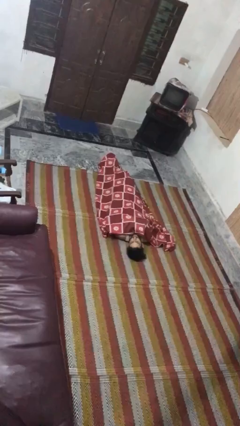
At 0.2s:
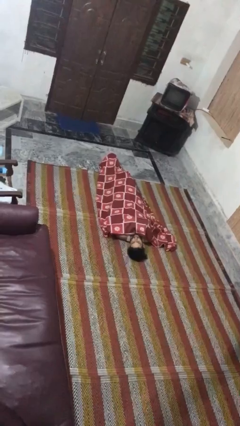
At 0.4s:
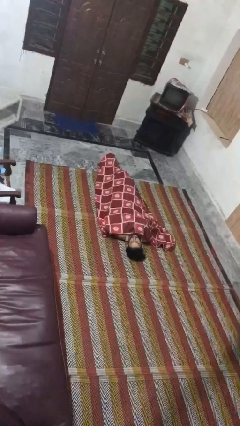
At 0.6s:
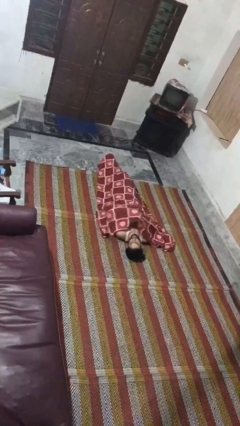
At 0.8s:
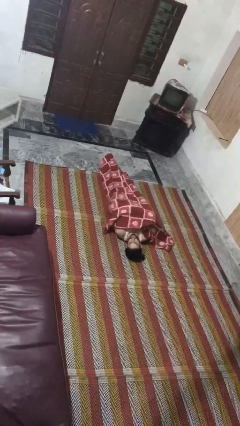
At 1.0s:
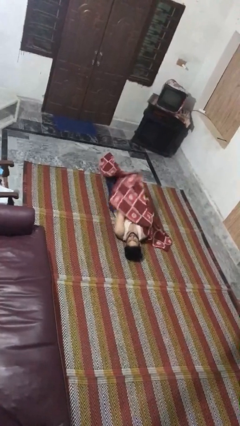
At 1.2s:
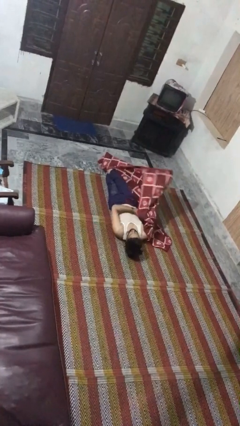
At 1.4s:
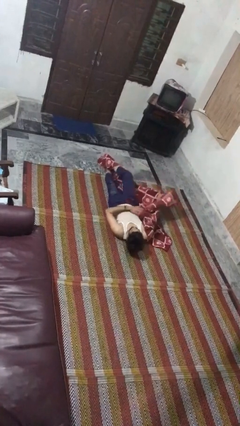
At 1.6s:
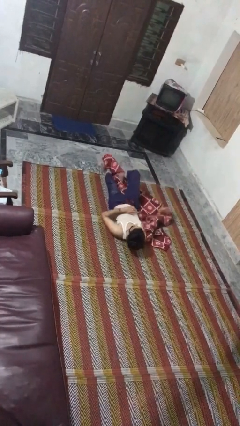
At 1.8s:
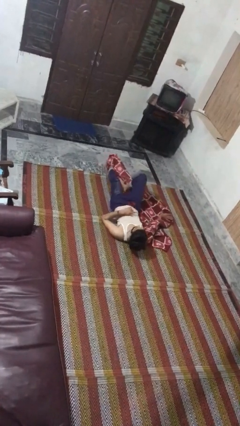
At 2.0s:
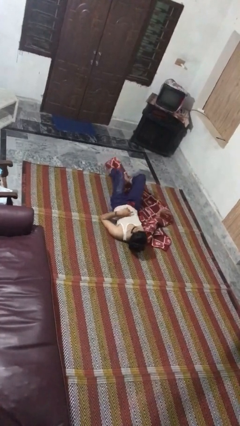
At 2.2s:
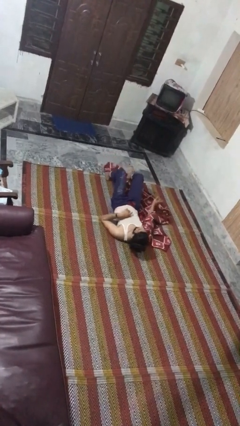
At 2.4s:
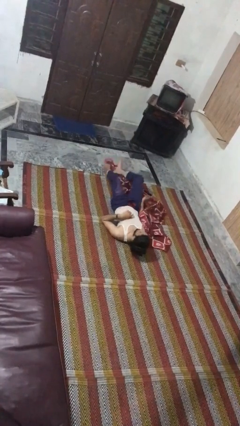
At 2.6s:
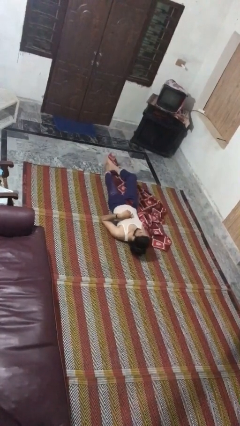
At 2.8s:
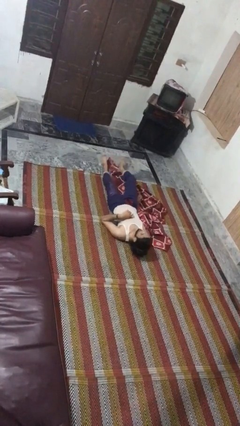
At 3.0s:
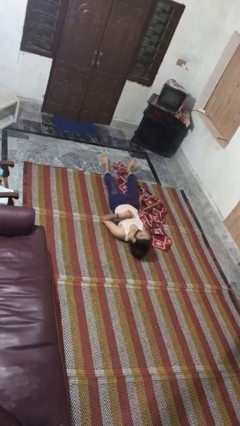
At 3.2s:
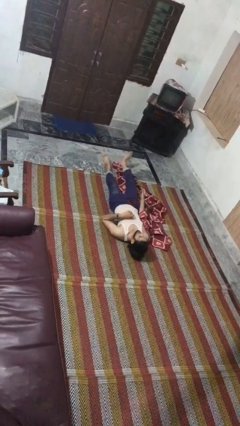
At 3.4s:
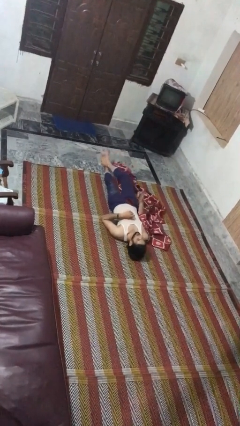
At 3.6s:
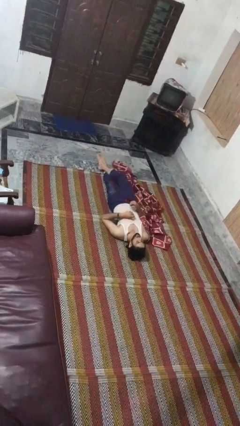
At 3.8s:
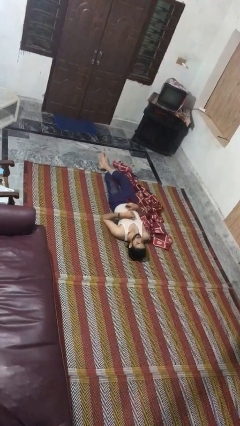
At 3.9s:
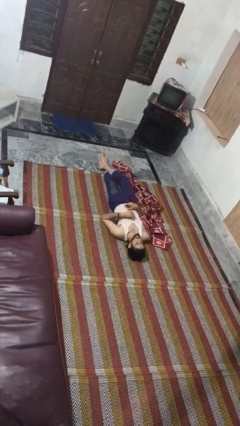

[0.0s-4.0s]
person uncovers with blanket

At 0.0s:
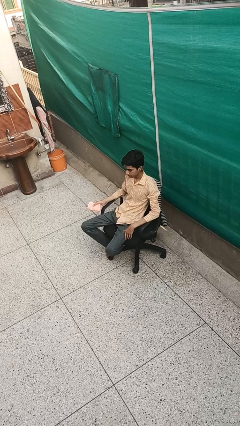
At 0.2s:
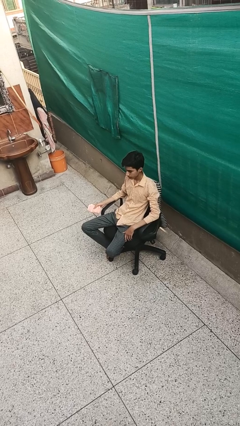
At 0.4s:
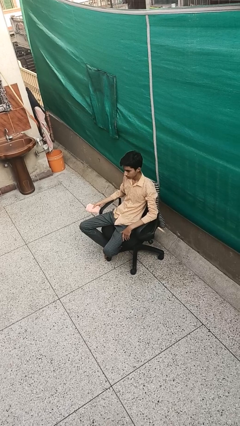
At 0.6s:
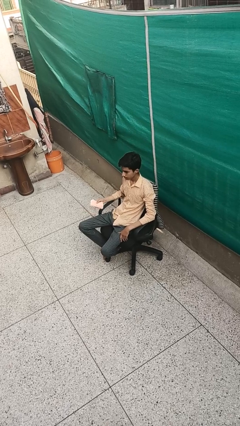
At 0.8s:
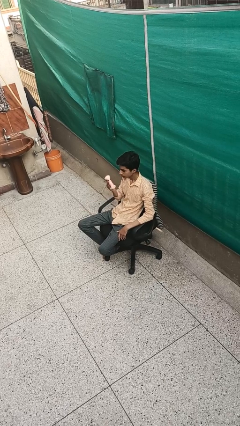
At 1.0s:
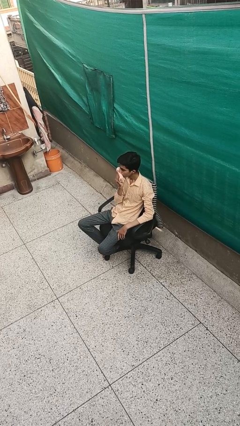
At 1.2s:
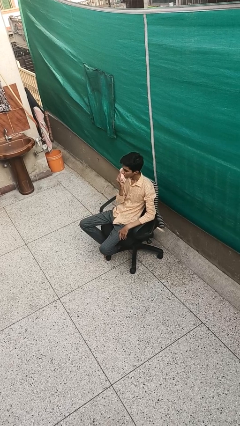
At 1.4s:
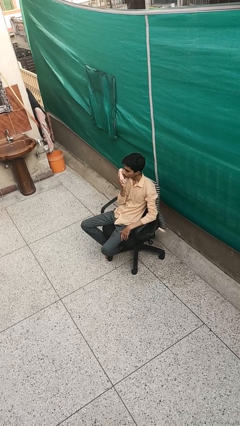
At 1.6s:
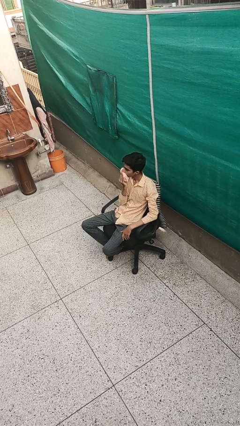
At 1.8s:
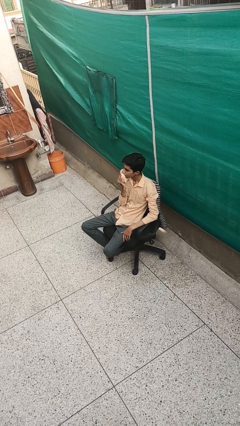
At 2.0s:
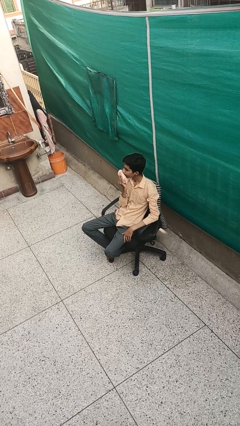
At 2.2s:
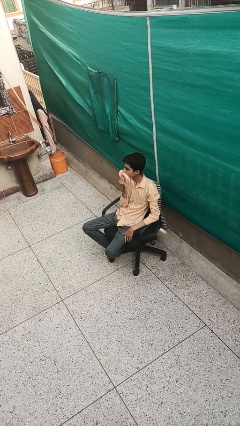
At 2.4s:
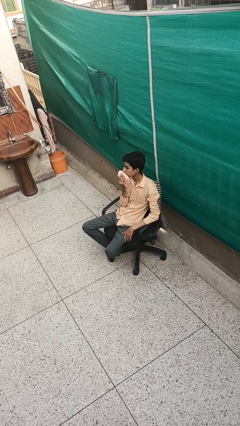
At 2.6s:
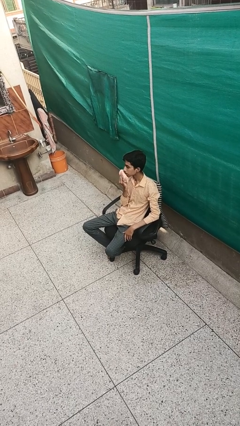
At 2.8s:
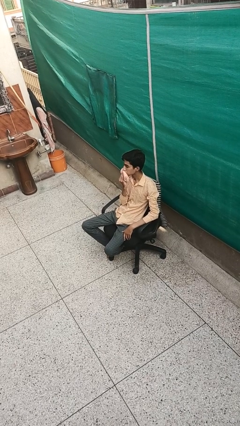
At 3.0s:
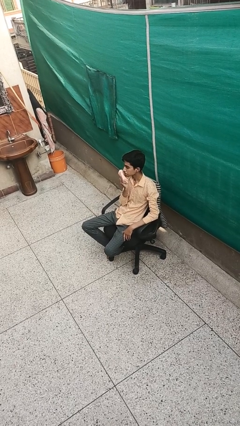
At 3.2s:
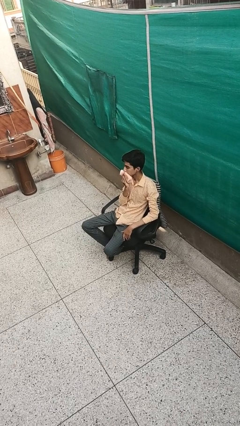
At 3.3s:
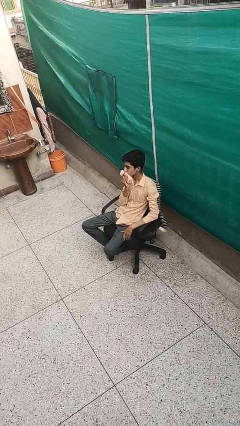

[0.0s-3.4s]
person wipes mouth with napkin

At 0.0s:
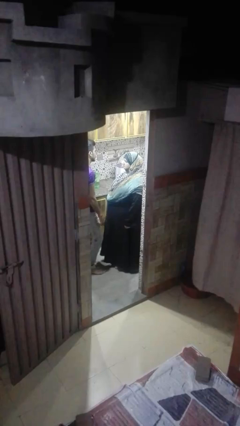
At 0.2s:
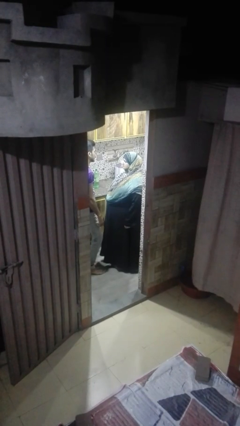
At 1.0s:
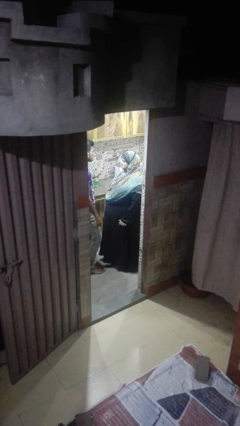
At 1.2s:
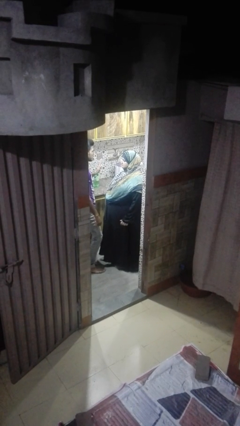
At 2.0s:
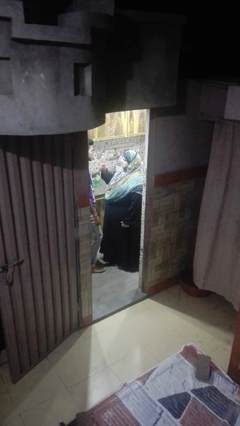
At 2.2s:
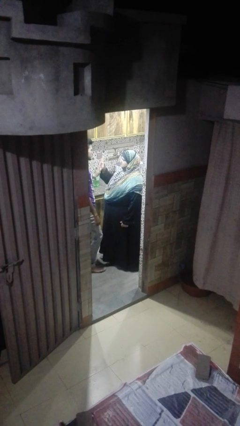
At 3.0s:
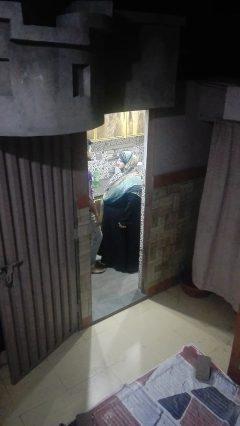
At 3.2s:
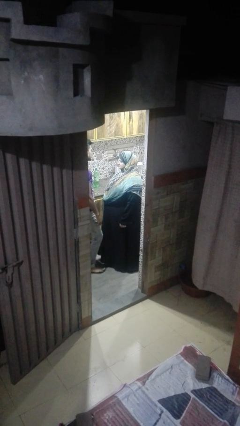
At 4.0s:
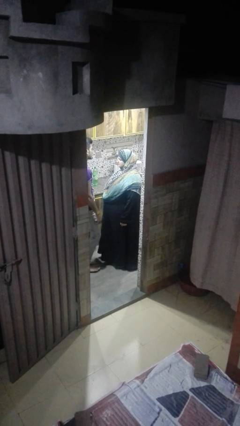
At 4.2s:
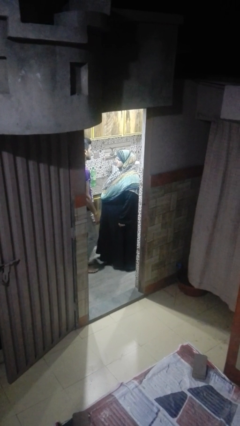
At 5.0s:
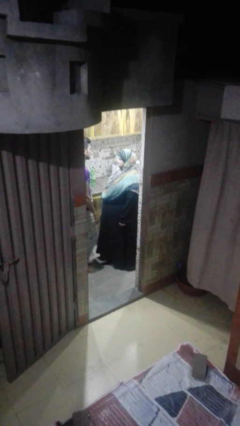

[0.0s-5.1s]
person highfives hand

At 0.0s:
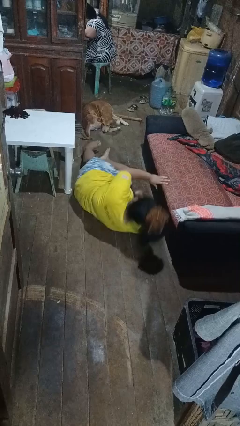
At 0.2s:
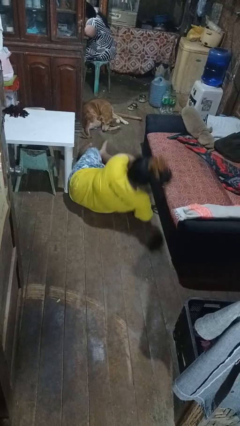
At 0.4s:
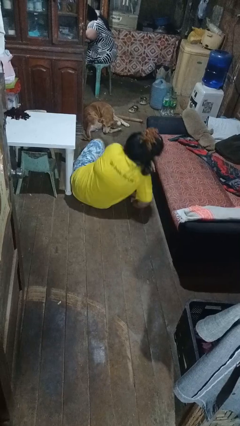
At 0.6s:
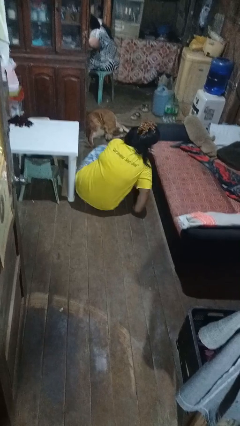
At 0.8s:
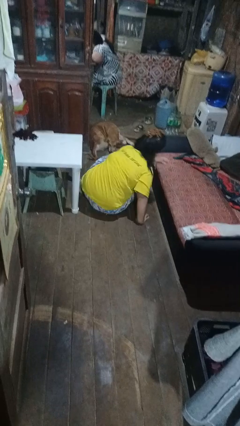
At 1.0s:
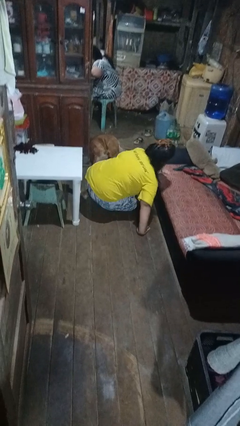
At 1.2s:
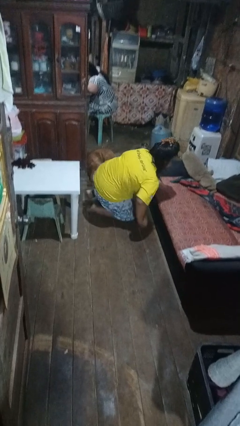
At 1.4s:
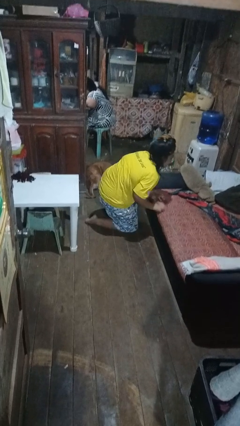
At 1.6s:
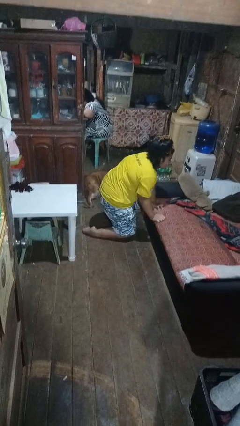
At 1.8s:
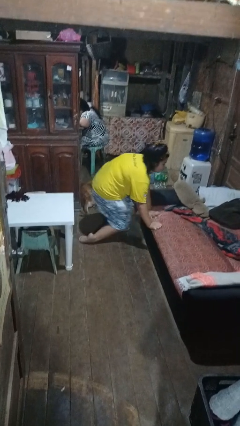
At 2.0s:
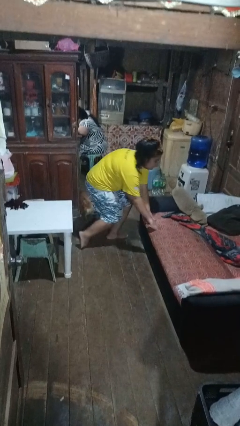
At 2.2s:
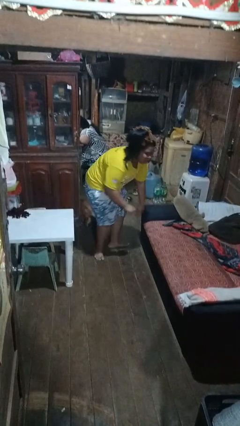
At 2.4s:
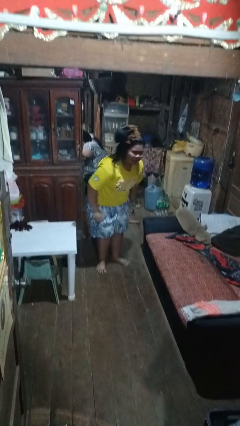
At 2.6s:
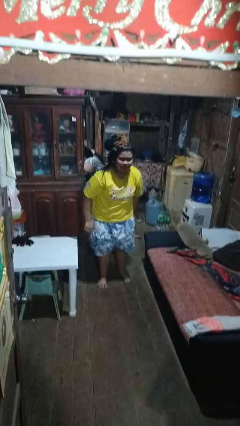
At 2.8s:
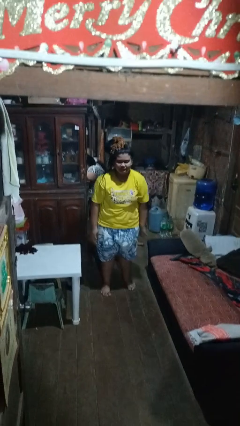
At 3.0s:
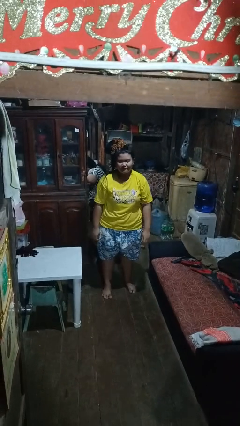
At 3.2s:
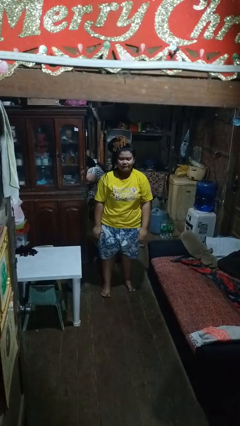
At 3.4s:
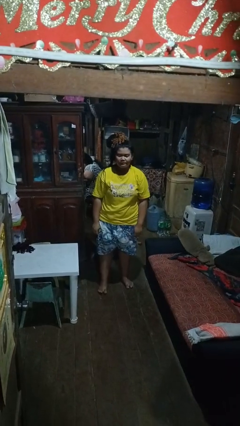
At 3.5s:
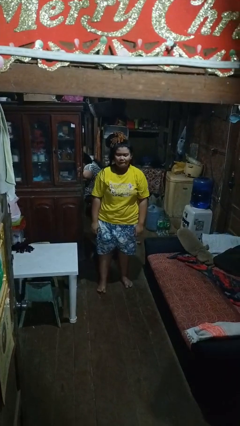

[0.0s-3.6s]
person stands up from floor

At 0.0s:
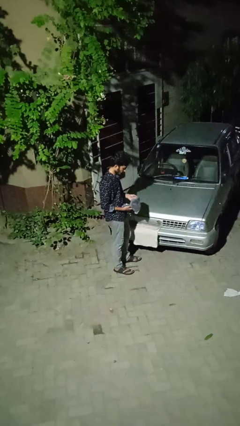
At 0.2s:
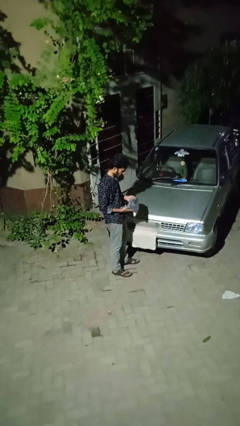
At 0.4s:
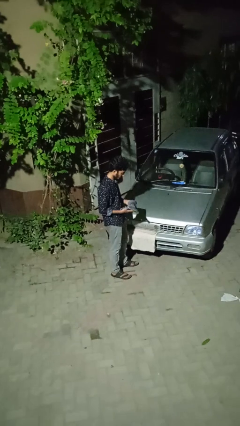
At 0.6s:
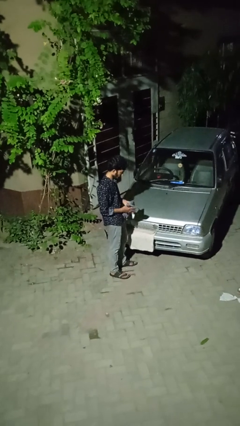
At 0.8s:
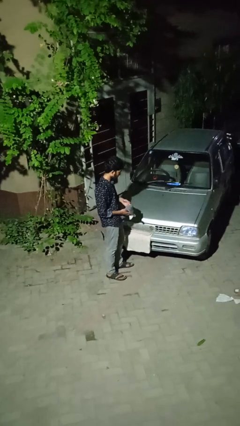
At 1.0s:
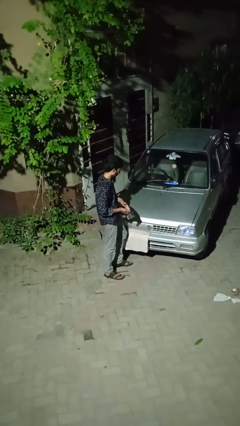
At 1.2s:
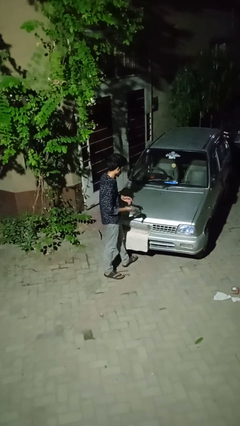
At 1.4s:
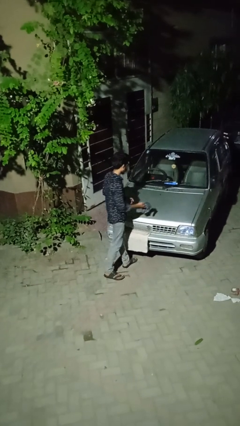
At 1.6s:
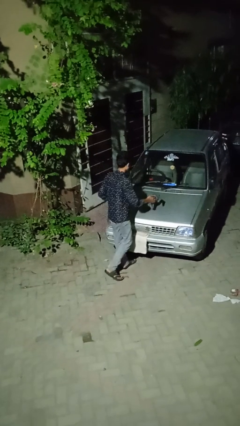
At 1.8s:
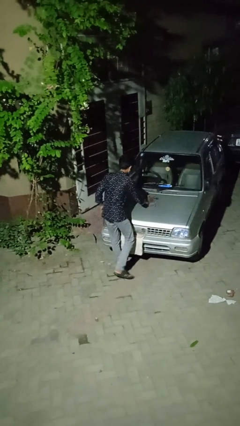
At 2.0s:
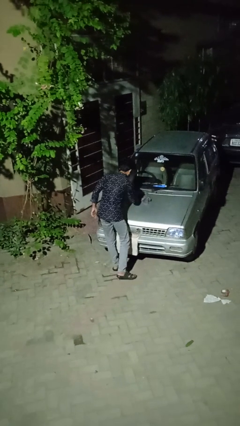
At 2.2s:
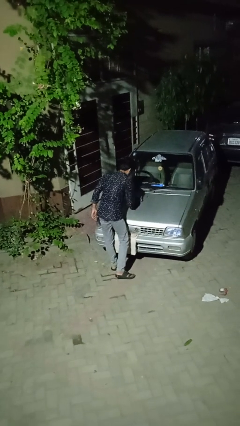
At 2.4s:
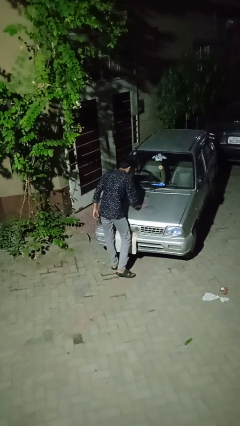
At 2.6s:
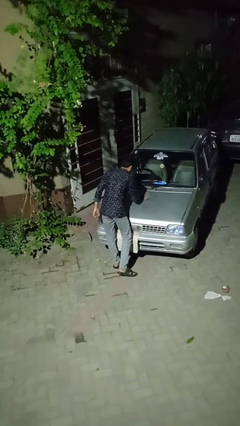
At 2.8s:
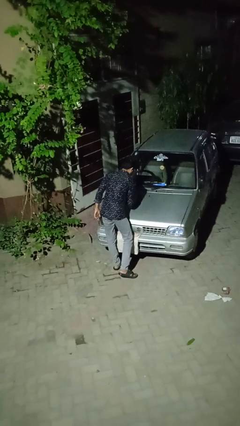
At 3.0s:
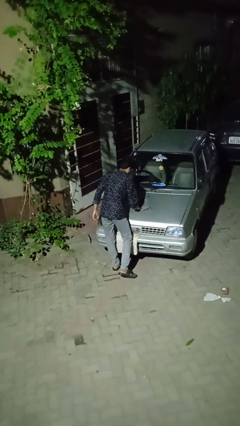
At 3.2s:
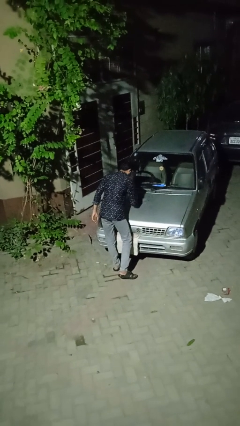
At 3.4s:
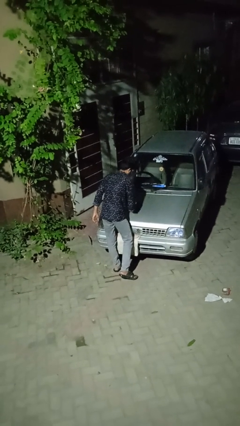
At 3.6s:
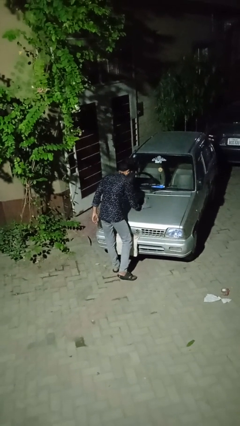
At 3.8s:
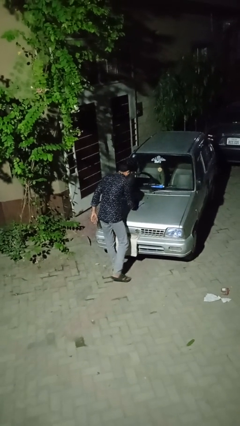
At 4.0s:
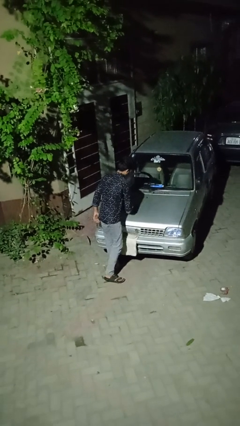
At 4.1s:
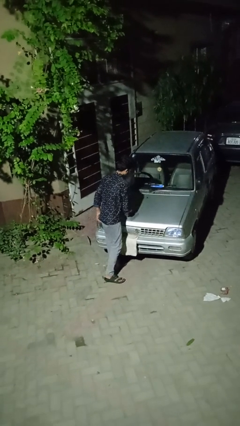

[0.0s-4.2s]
person polishes car with rag
